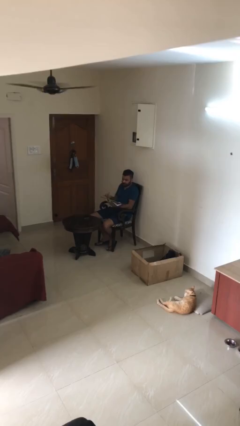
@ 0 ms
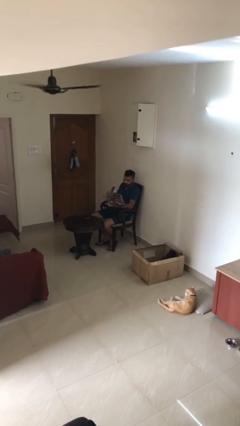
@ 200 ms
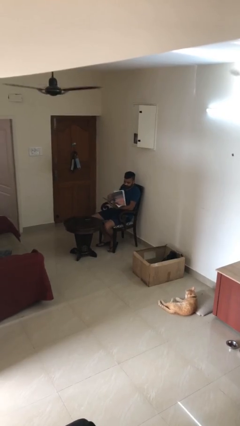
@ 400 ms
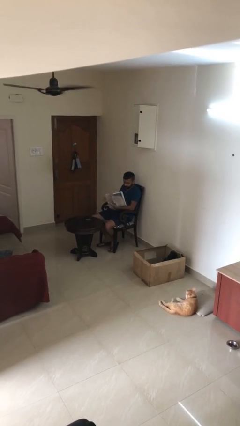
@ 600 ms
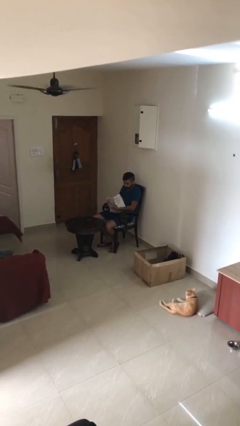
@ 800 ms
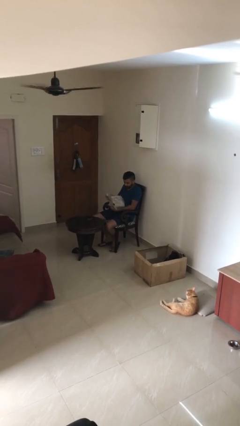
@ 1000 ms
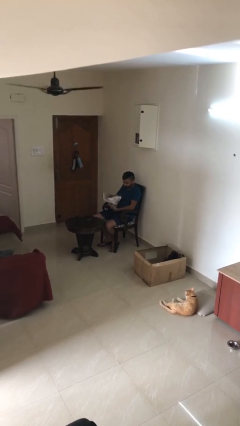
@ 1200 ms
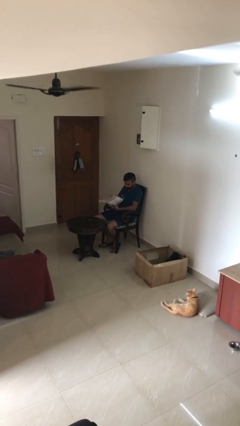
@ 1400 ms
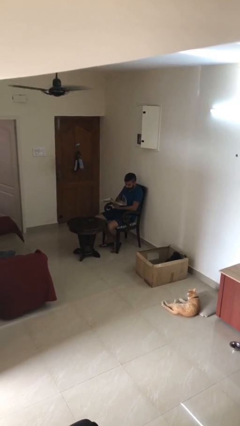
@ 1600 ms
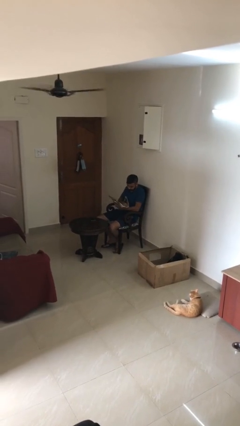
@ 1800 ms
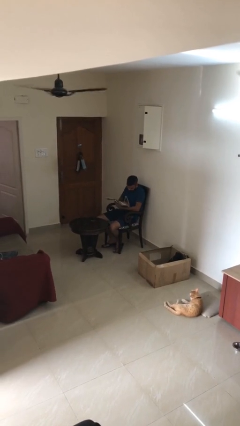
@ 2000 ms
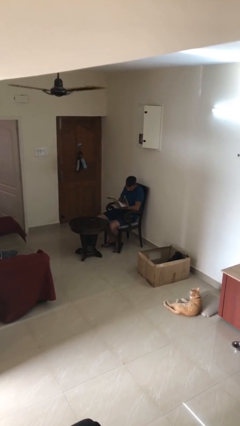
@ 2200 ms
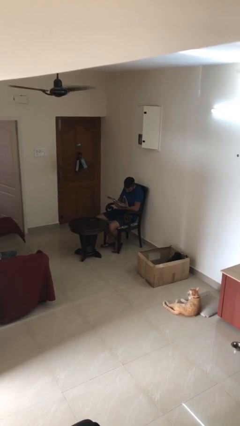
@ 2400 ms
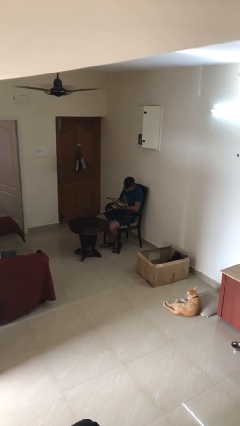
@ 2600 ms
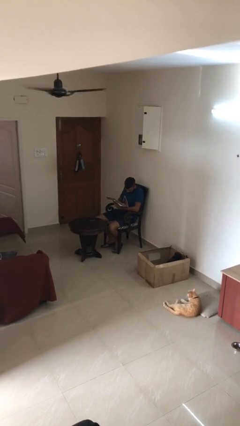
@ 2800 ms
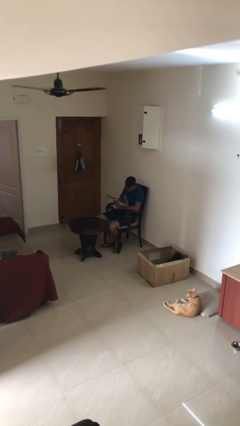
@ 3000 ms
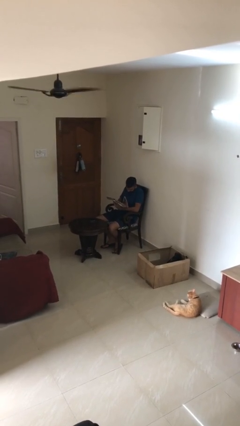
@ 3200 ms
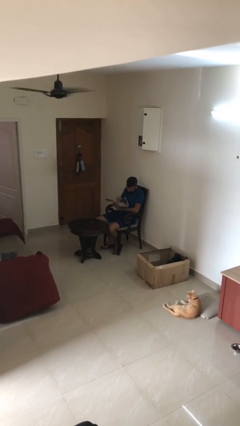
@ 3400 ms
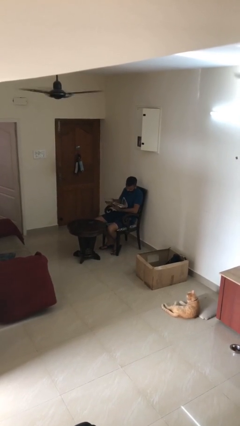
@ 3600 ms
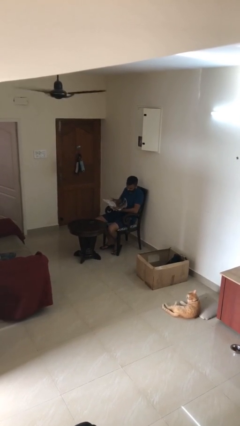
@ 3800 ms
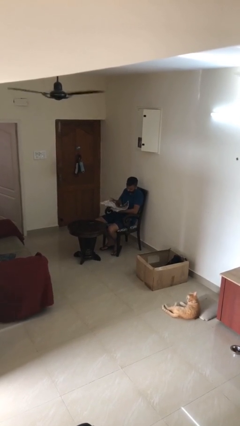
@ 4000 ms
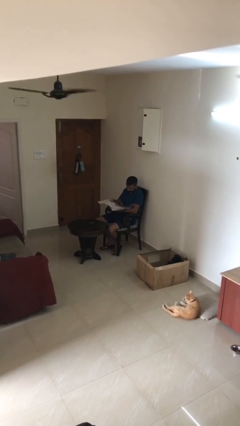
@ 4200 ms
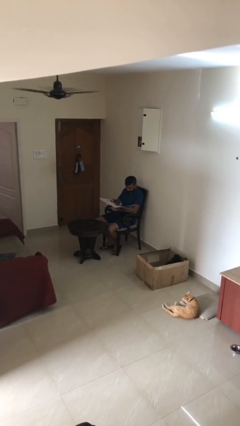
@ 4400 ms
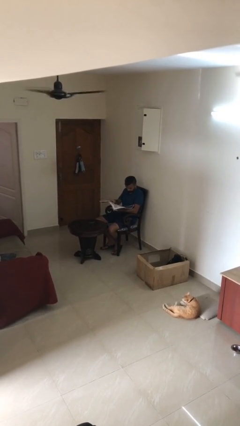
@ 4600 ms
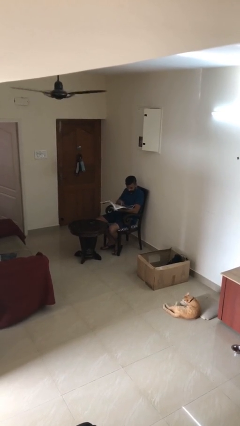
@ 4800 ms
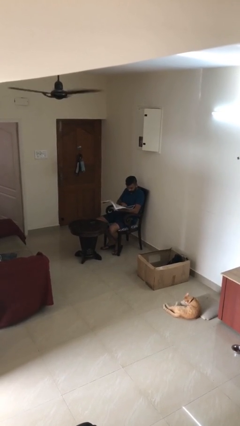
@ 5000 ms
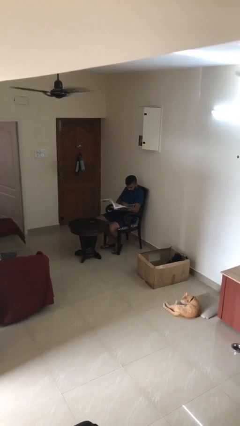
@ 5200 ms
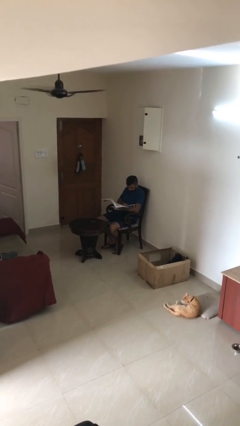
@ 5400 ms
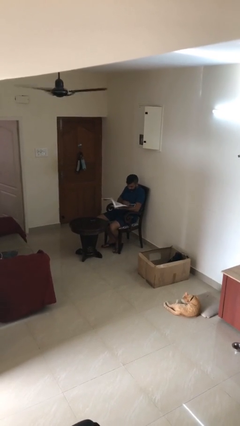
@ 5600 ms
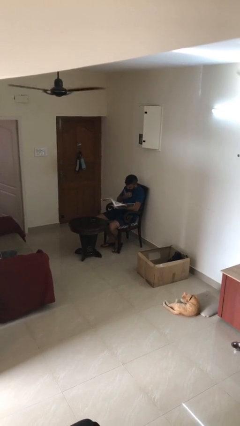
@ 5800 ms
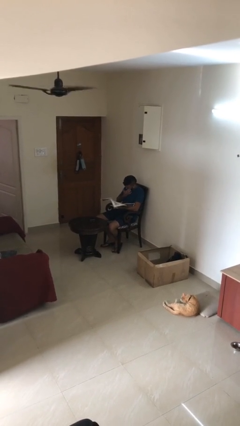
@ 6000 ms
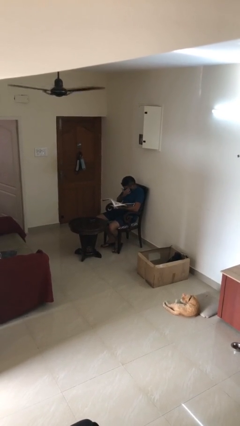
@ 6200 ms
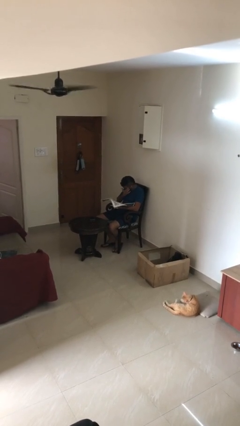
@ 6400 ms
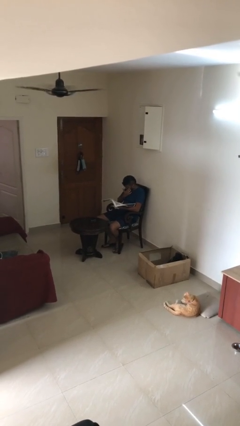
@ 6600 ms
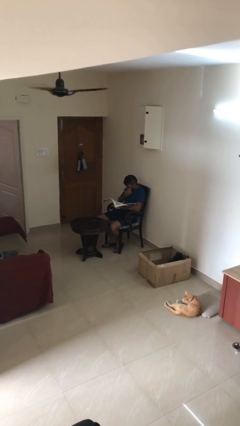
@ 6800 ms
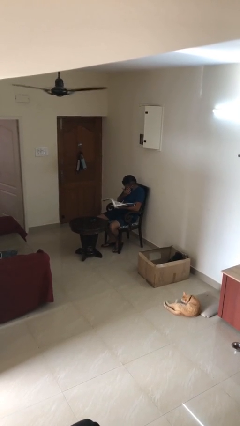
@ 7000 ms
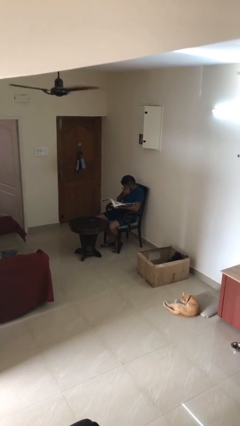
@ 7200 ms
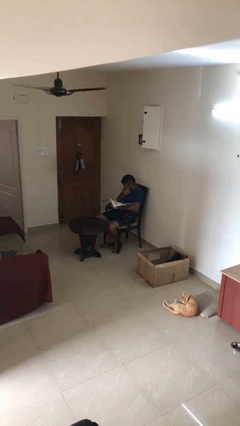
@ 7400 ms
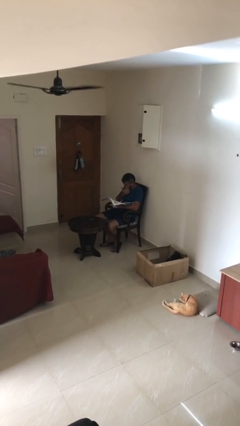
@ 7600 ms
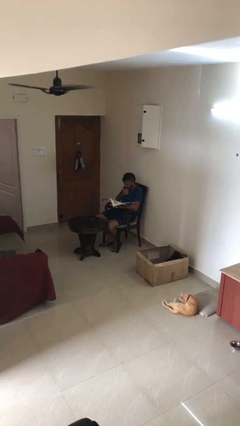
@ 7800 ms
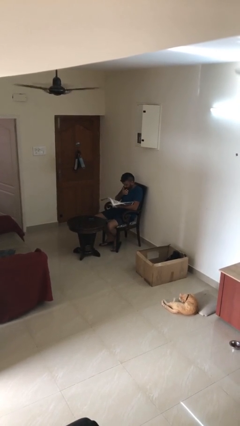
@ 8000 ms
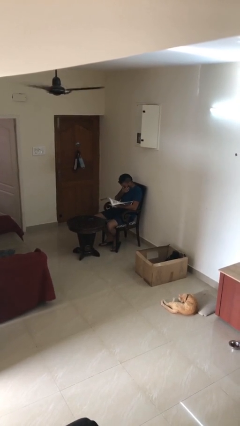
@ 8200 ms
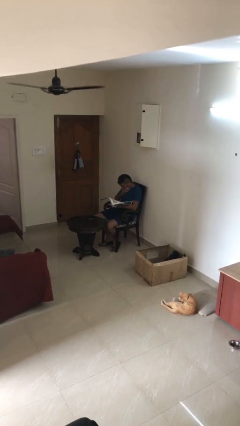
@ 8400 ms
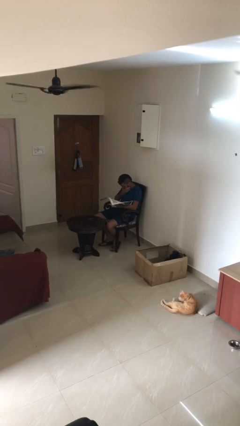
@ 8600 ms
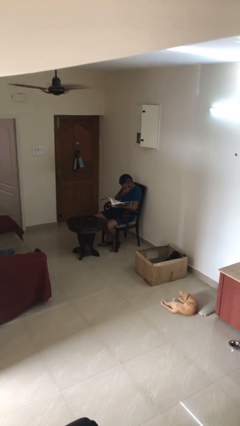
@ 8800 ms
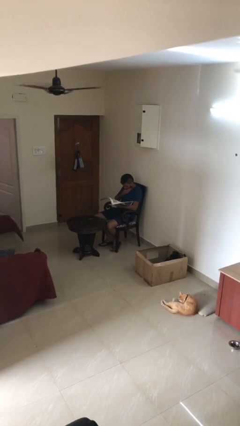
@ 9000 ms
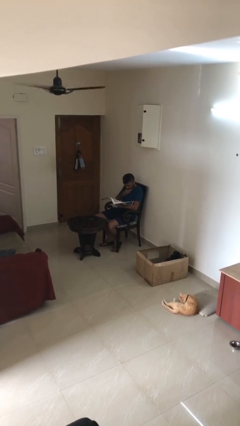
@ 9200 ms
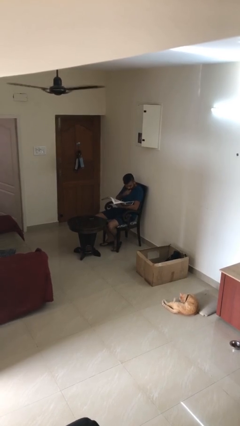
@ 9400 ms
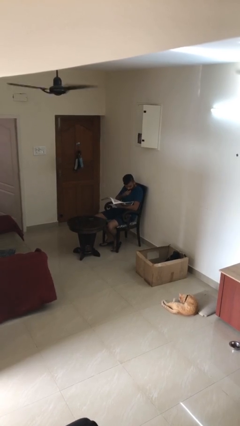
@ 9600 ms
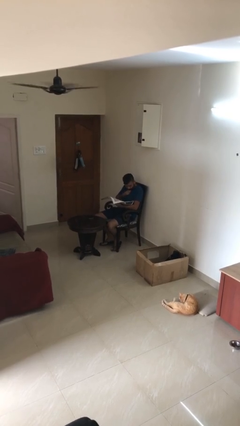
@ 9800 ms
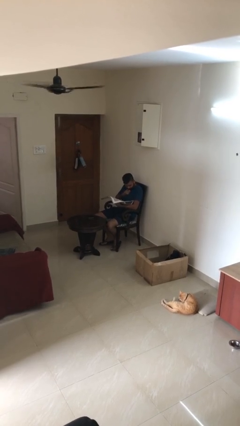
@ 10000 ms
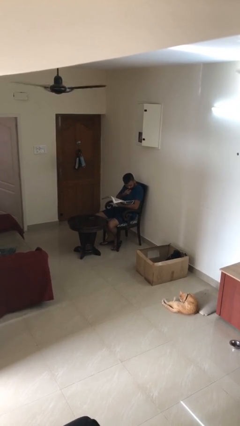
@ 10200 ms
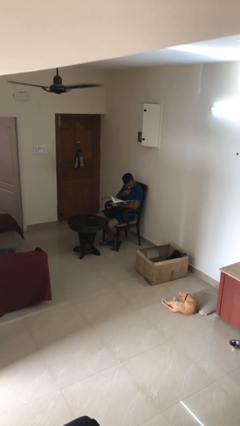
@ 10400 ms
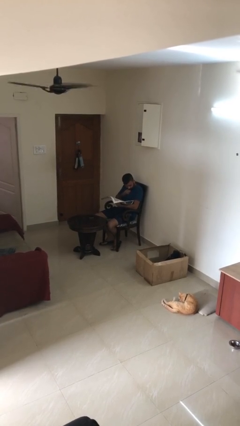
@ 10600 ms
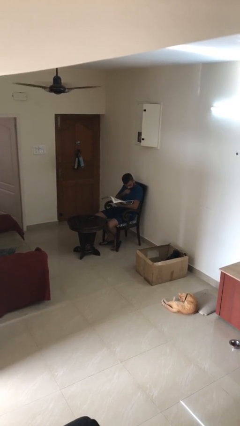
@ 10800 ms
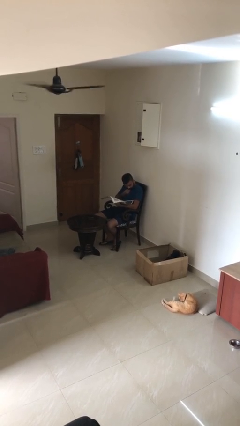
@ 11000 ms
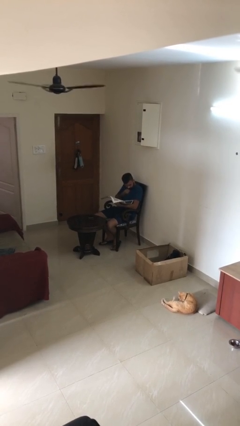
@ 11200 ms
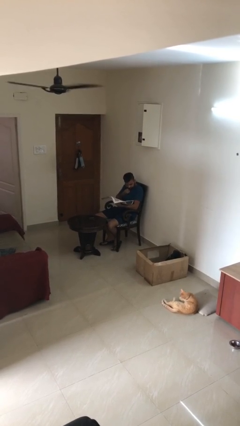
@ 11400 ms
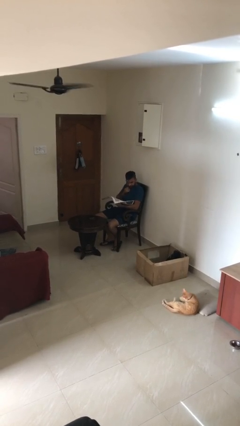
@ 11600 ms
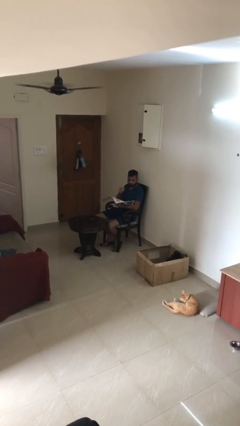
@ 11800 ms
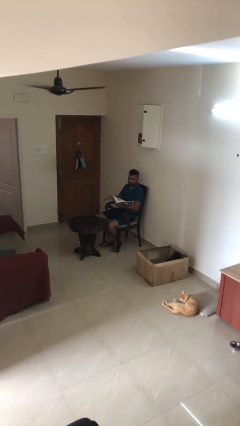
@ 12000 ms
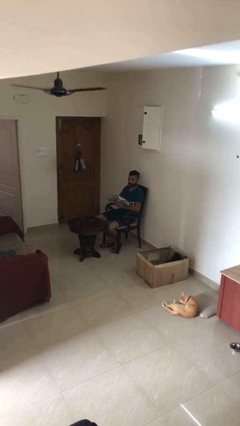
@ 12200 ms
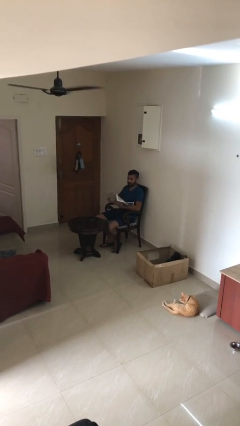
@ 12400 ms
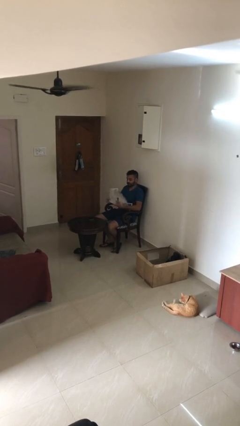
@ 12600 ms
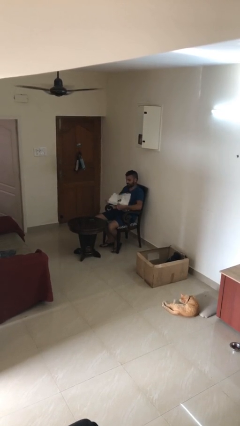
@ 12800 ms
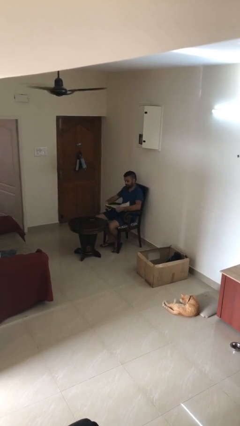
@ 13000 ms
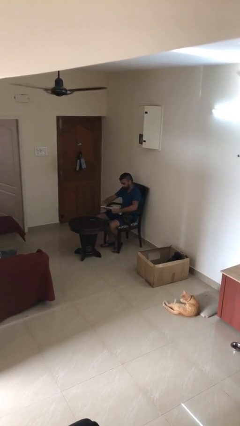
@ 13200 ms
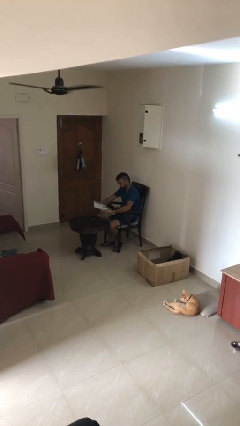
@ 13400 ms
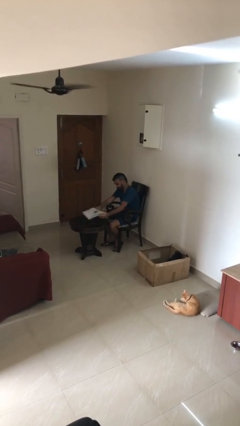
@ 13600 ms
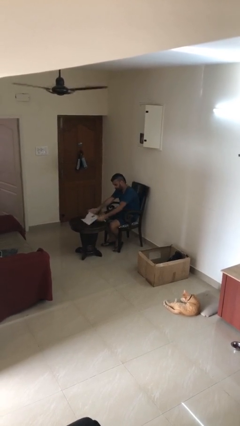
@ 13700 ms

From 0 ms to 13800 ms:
person reads document

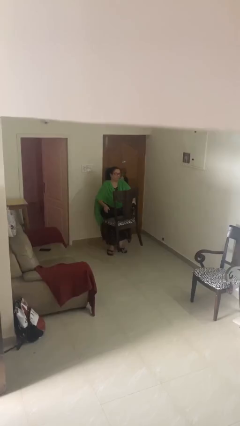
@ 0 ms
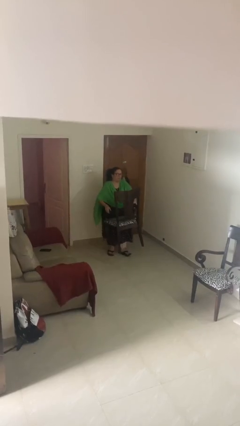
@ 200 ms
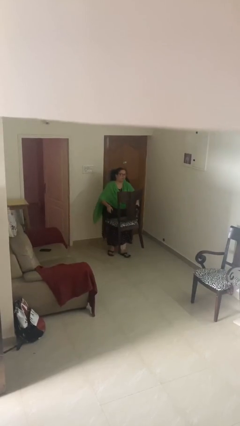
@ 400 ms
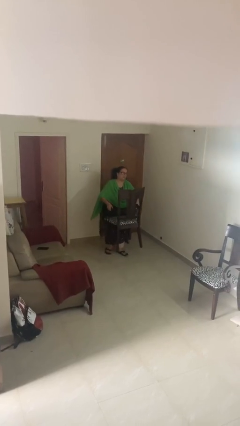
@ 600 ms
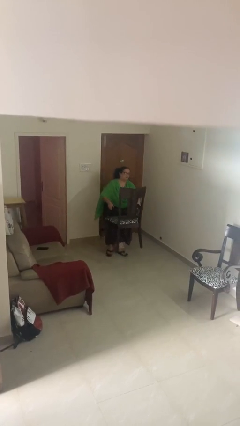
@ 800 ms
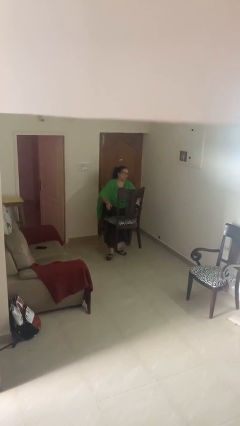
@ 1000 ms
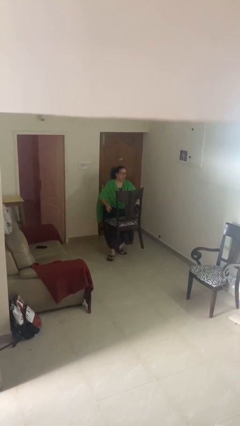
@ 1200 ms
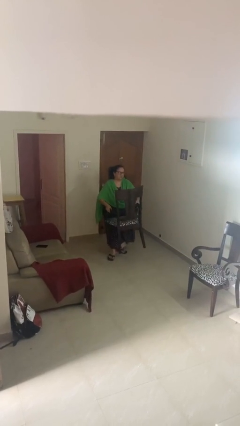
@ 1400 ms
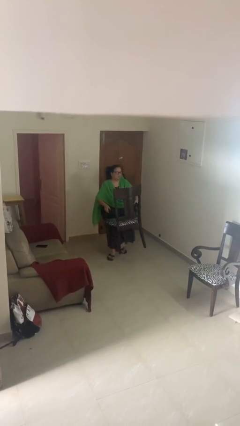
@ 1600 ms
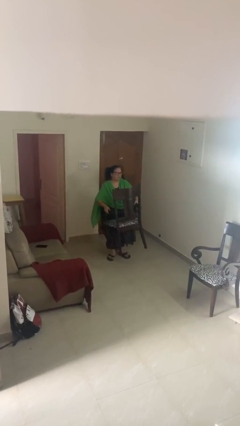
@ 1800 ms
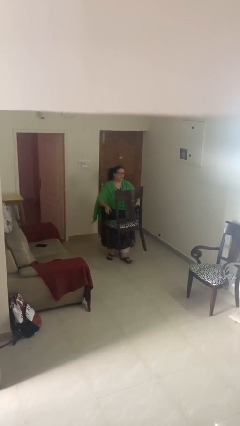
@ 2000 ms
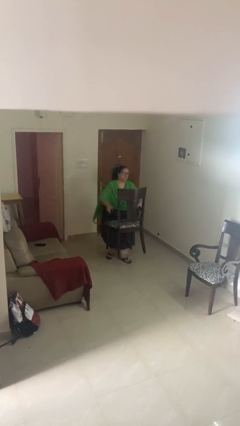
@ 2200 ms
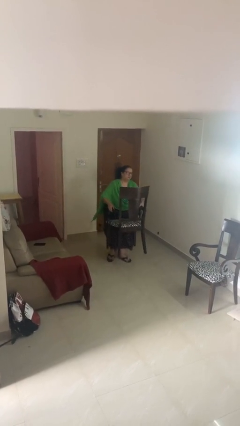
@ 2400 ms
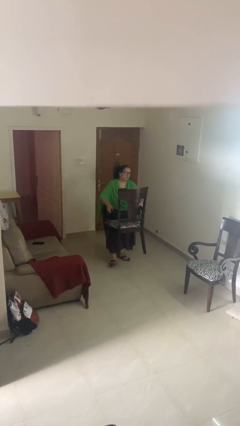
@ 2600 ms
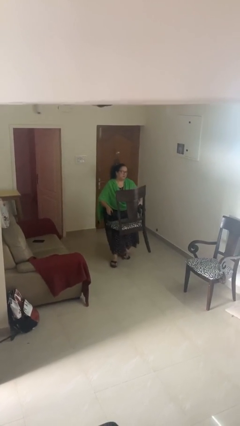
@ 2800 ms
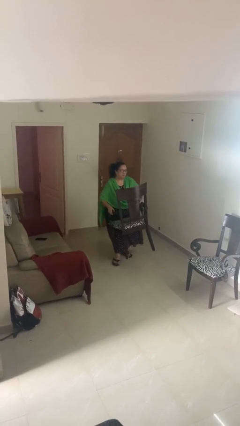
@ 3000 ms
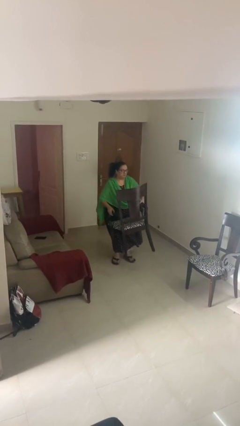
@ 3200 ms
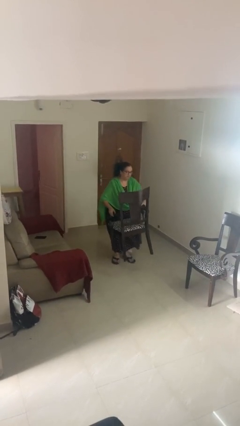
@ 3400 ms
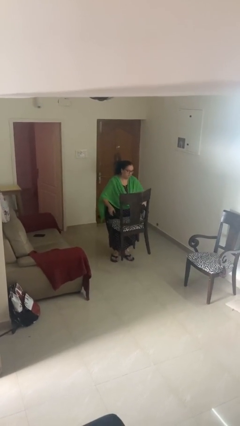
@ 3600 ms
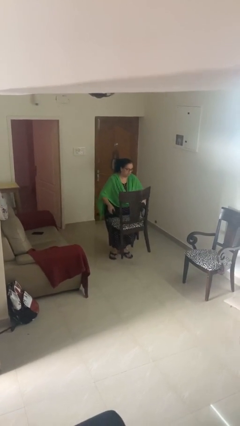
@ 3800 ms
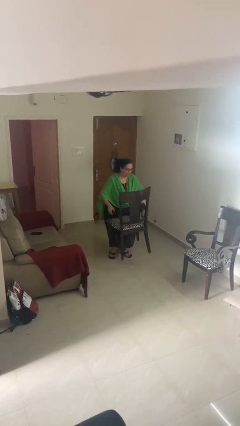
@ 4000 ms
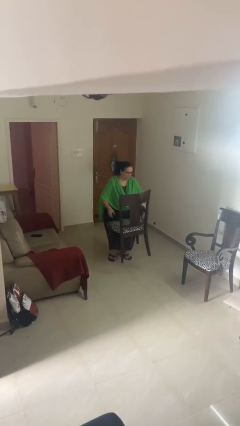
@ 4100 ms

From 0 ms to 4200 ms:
person carries heavy object
